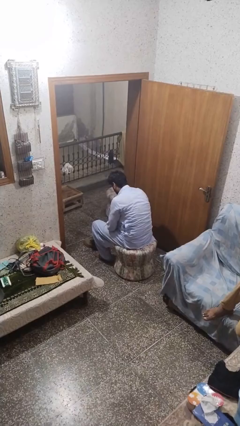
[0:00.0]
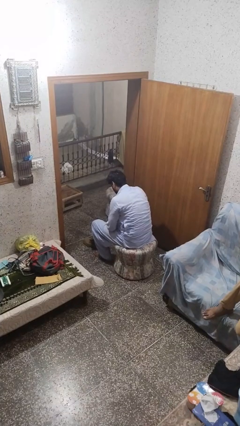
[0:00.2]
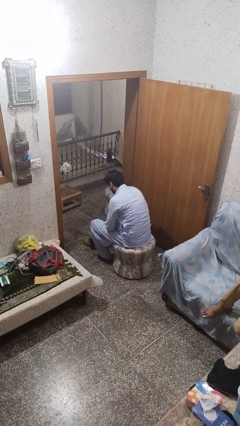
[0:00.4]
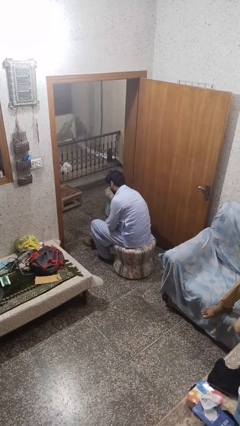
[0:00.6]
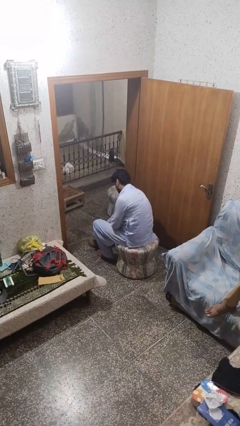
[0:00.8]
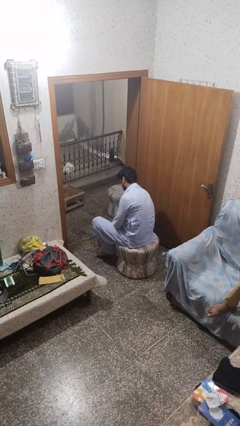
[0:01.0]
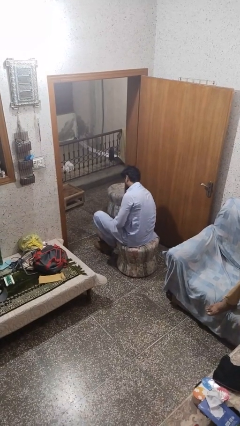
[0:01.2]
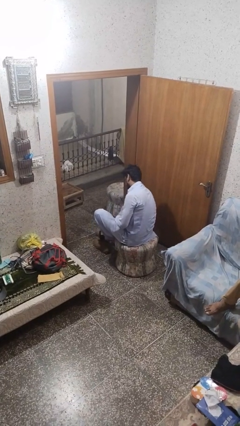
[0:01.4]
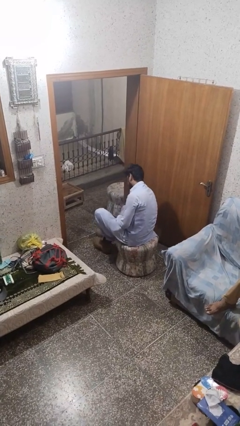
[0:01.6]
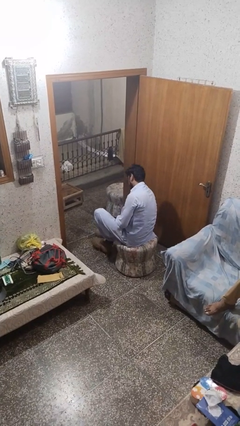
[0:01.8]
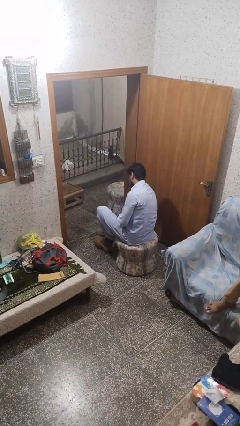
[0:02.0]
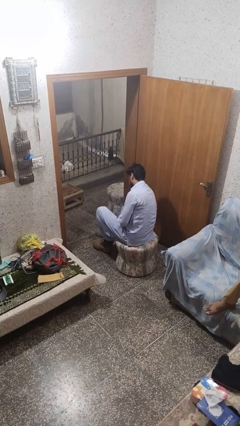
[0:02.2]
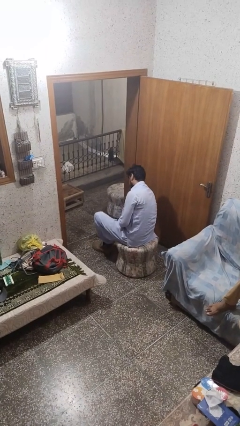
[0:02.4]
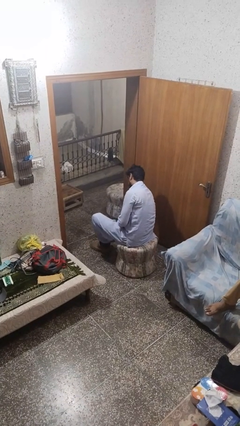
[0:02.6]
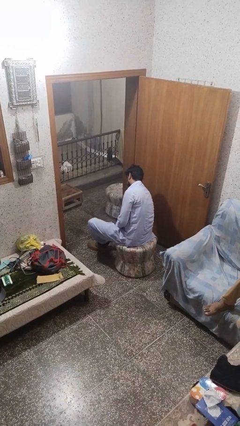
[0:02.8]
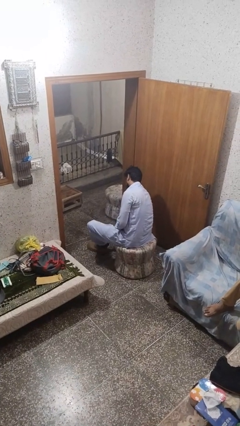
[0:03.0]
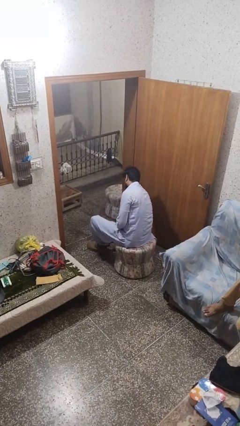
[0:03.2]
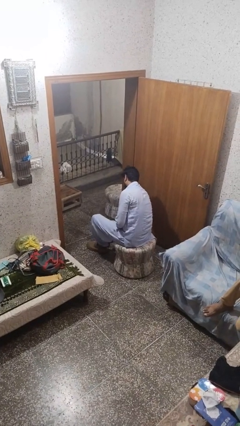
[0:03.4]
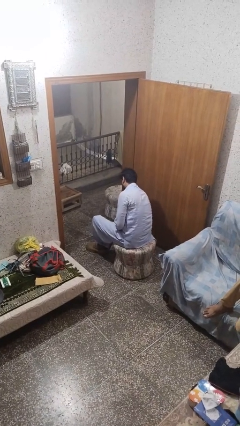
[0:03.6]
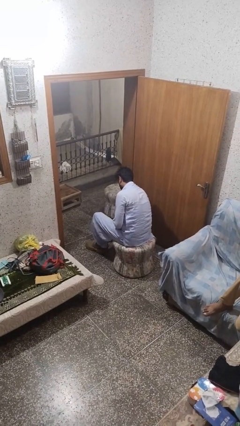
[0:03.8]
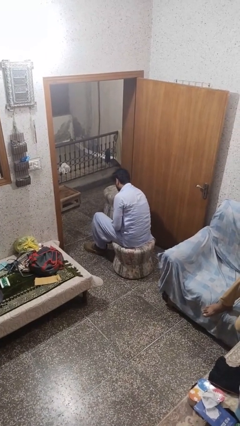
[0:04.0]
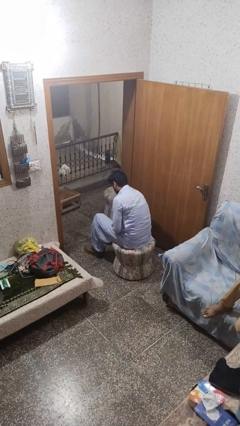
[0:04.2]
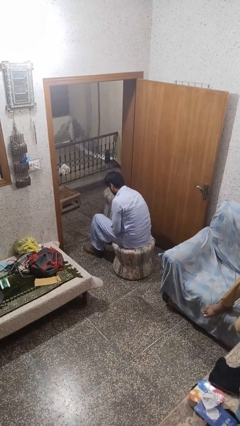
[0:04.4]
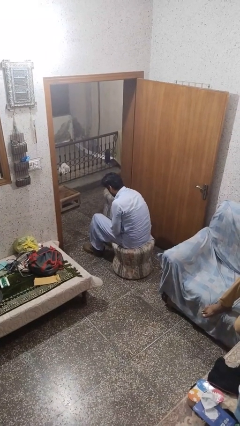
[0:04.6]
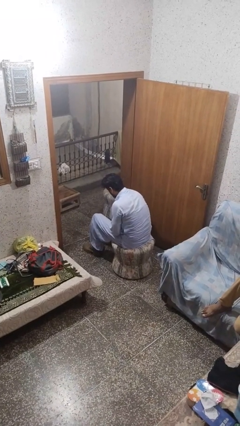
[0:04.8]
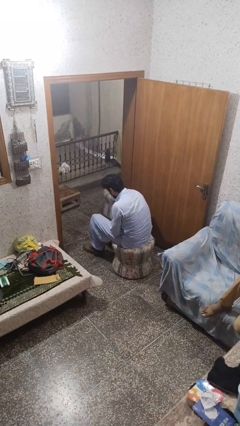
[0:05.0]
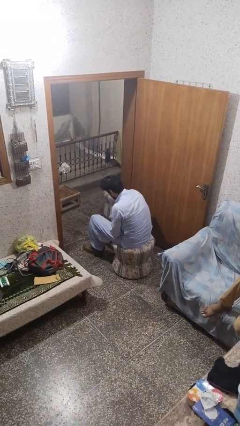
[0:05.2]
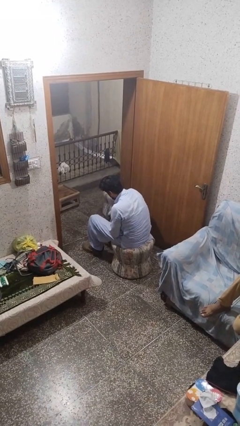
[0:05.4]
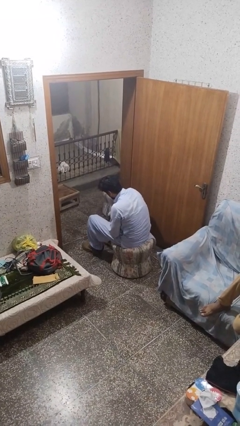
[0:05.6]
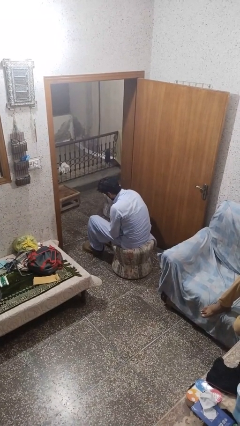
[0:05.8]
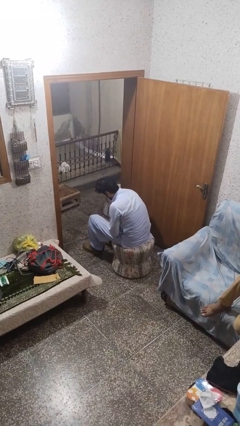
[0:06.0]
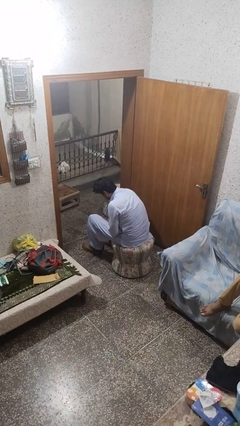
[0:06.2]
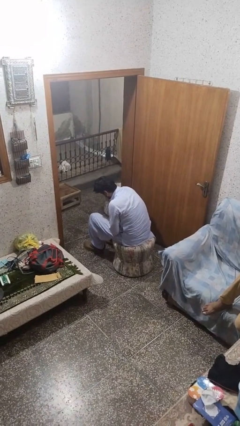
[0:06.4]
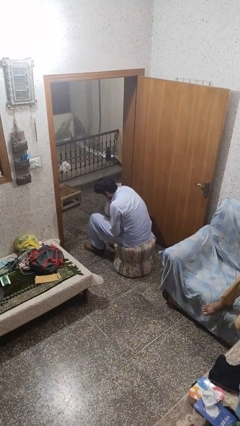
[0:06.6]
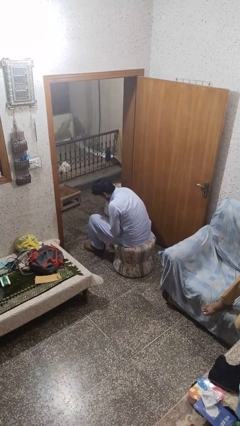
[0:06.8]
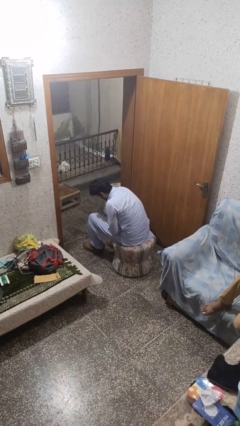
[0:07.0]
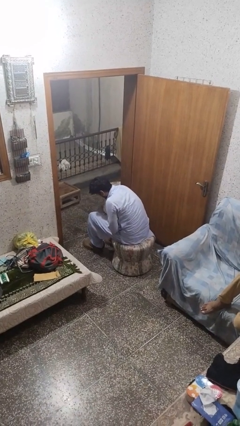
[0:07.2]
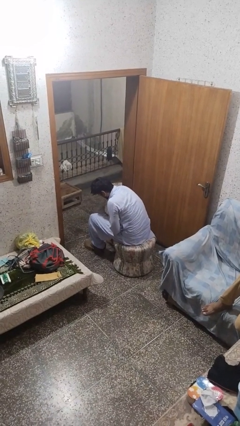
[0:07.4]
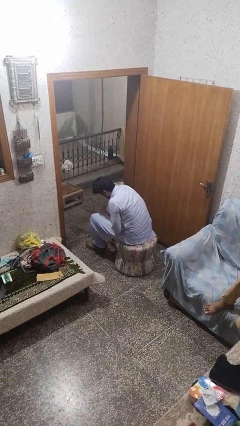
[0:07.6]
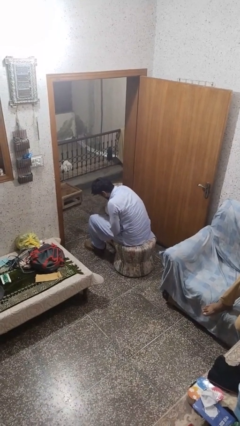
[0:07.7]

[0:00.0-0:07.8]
person puts on shoes

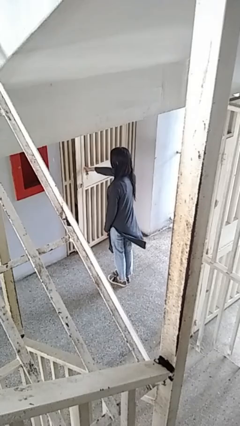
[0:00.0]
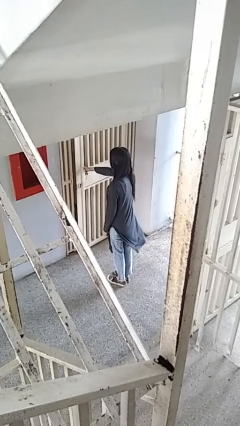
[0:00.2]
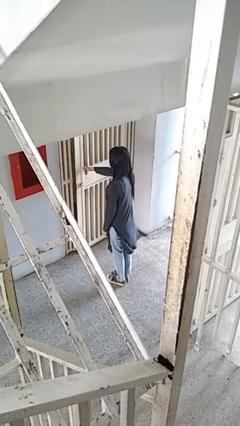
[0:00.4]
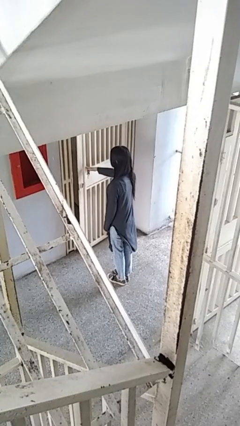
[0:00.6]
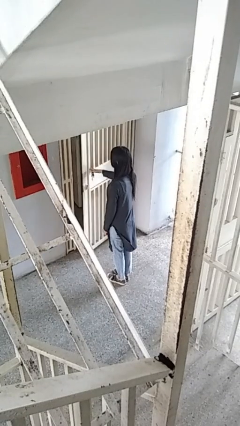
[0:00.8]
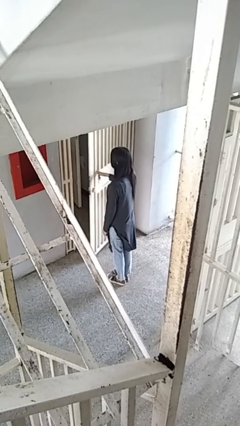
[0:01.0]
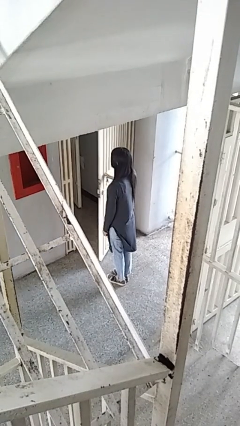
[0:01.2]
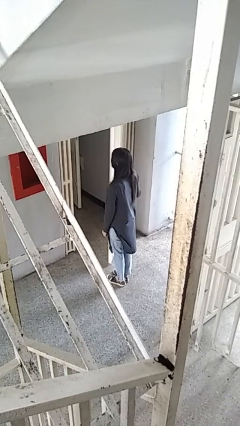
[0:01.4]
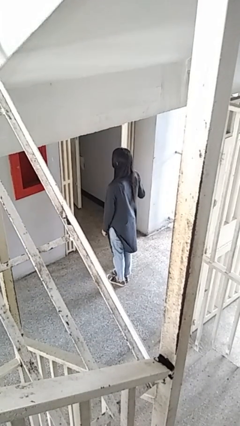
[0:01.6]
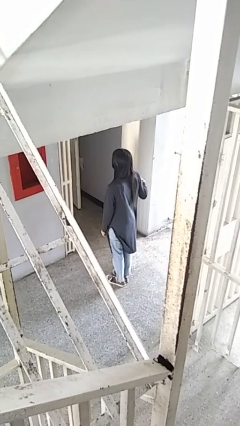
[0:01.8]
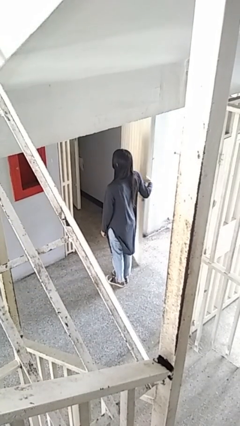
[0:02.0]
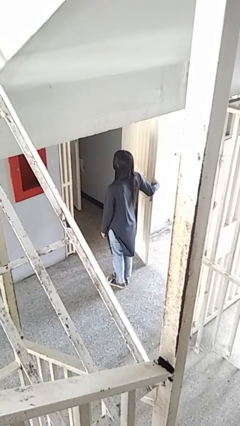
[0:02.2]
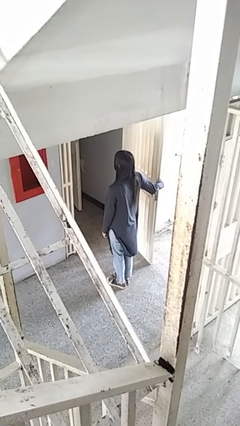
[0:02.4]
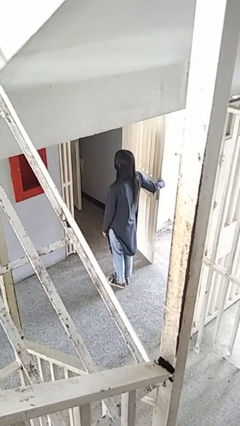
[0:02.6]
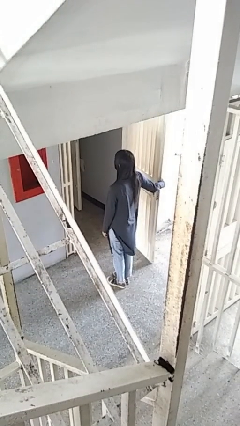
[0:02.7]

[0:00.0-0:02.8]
person opens gate

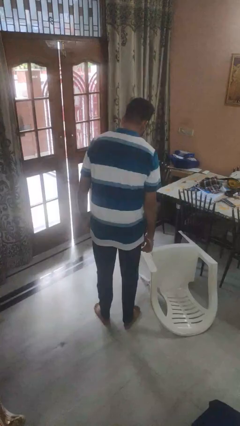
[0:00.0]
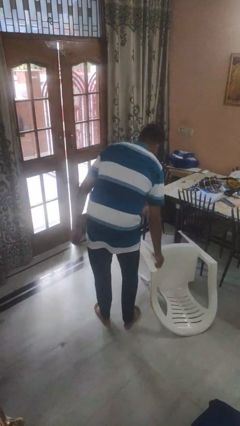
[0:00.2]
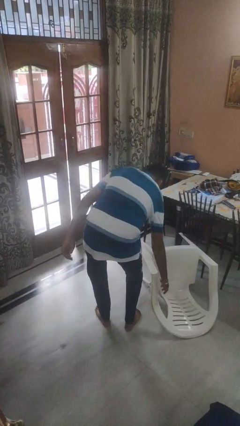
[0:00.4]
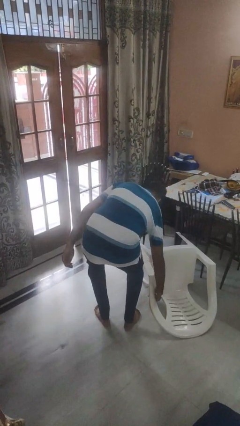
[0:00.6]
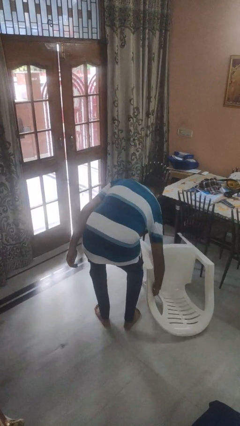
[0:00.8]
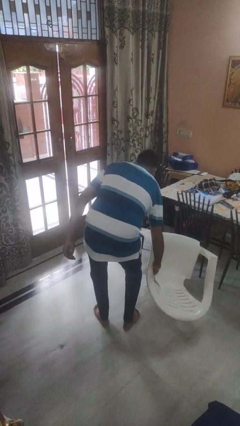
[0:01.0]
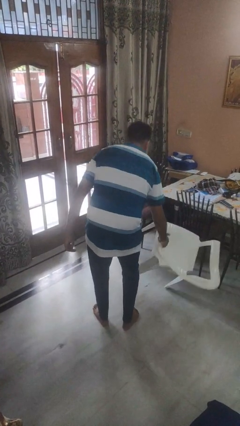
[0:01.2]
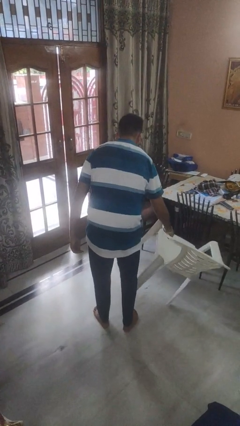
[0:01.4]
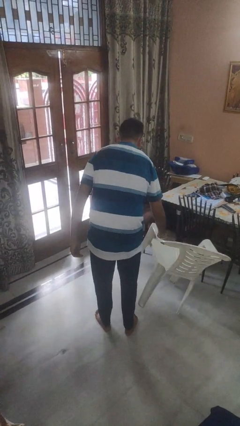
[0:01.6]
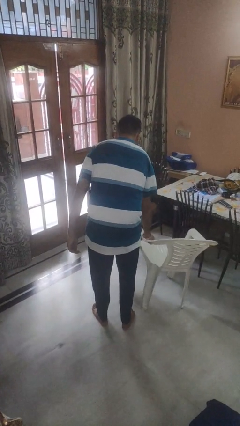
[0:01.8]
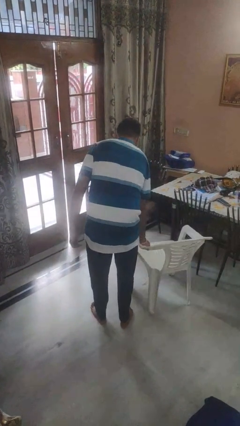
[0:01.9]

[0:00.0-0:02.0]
person sets upright furniture

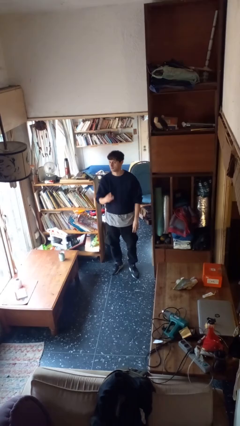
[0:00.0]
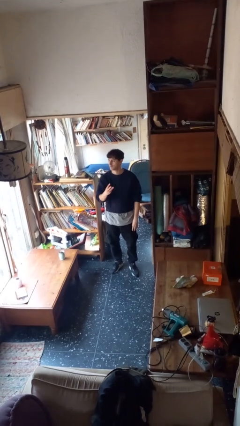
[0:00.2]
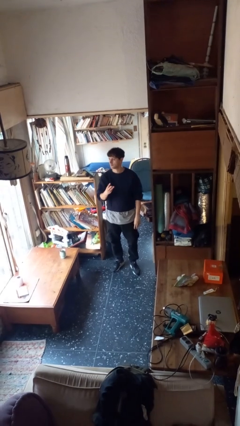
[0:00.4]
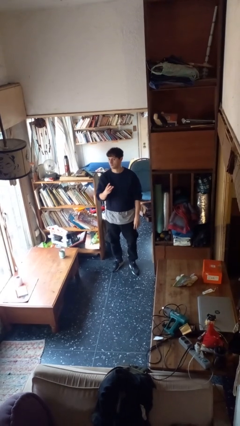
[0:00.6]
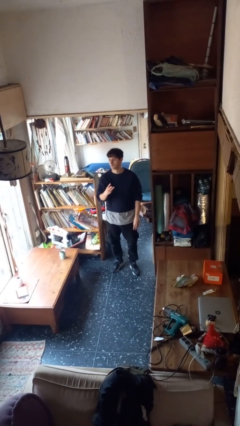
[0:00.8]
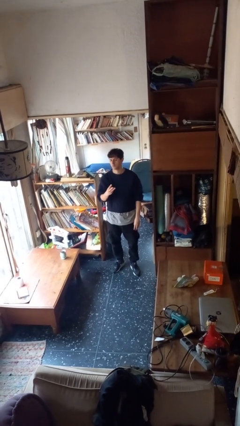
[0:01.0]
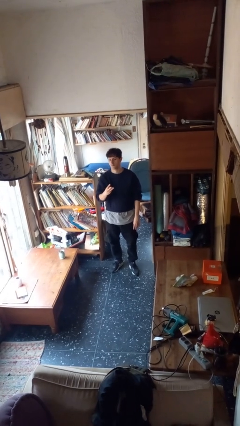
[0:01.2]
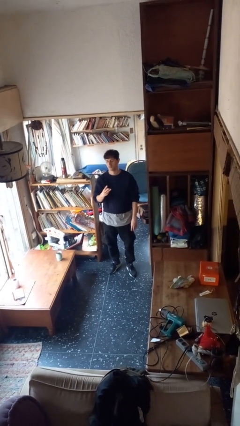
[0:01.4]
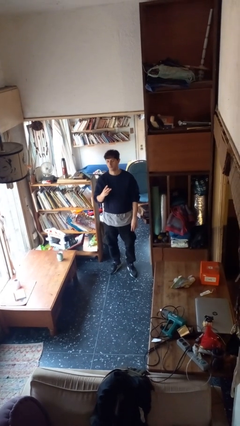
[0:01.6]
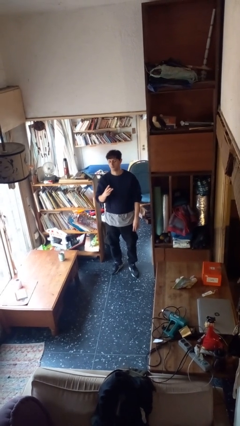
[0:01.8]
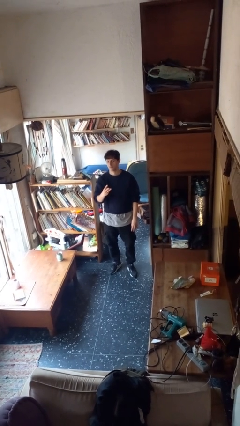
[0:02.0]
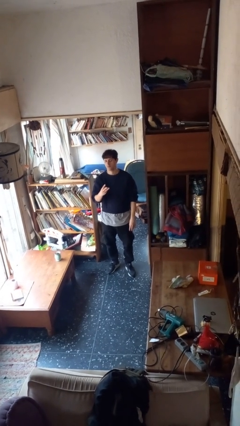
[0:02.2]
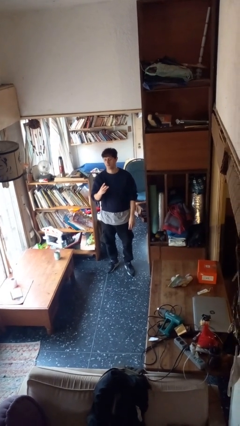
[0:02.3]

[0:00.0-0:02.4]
person gestures number three

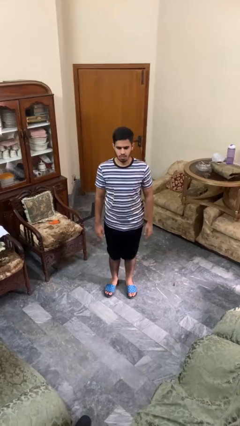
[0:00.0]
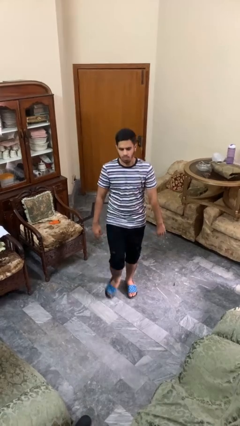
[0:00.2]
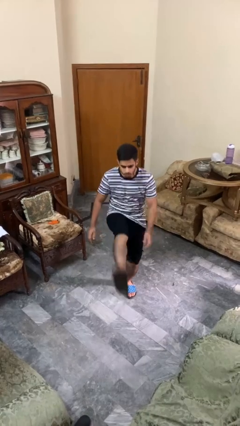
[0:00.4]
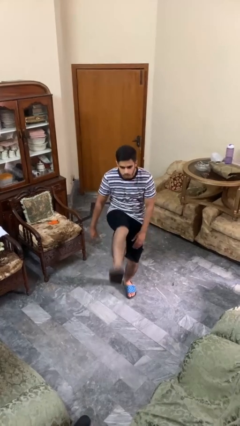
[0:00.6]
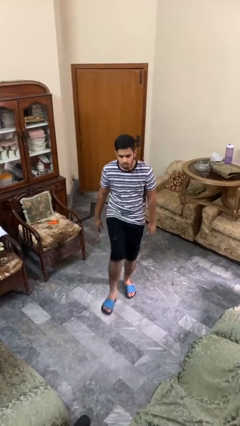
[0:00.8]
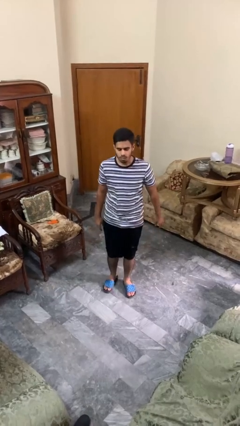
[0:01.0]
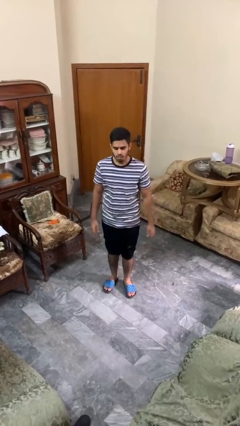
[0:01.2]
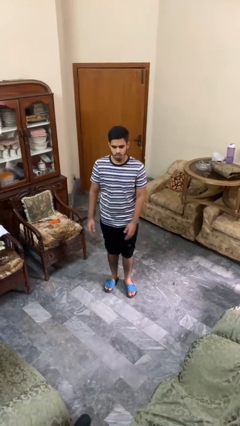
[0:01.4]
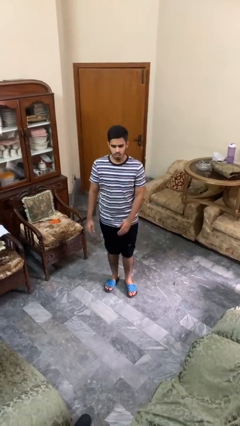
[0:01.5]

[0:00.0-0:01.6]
person karate kicks

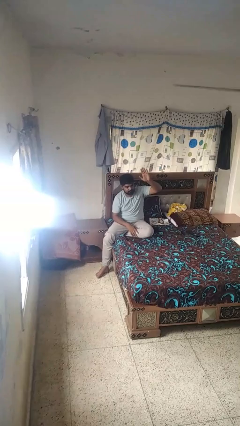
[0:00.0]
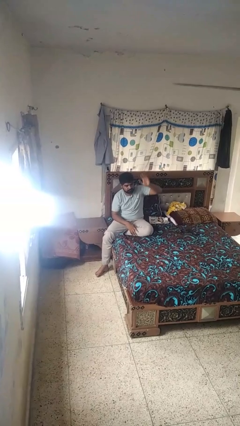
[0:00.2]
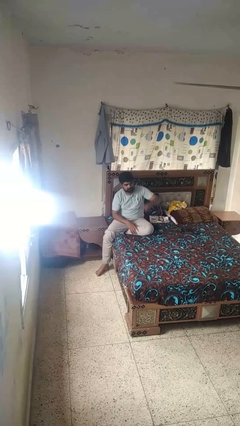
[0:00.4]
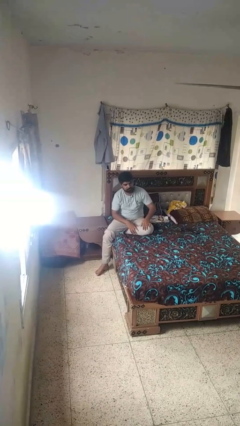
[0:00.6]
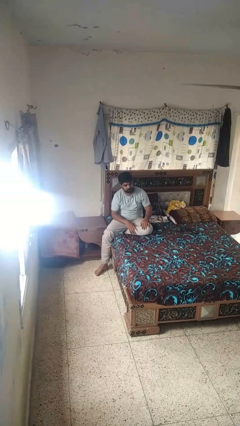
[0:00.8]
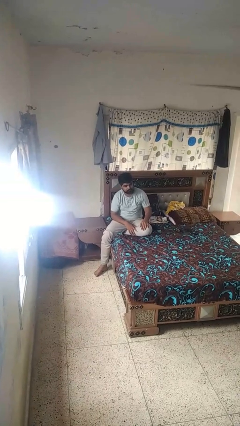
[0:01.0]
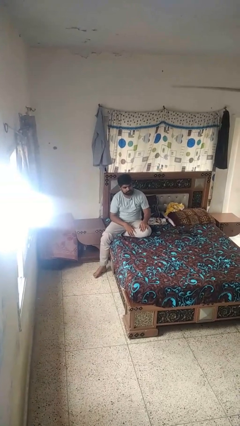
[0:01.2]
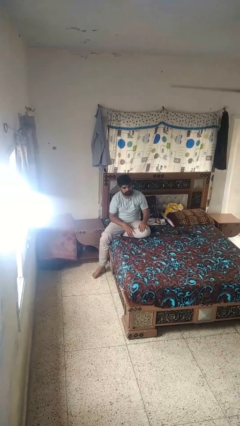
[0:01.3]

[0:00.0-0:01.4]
person gestures lower hand
